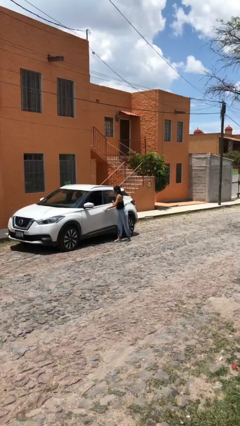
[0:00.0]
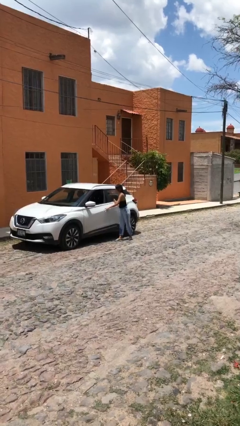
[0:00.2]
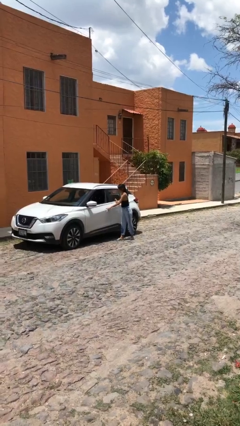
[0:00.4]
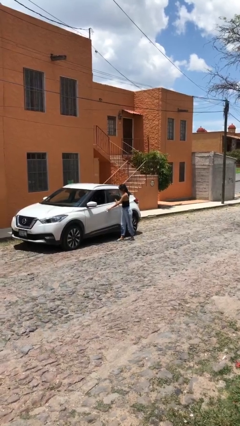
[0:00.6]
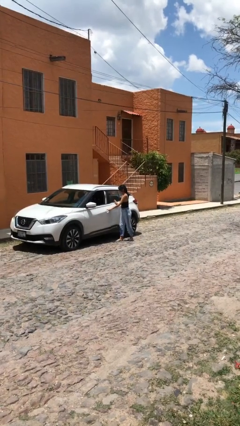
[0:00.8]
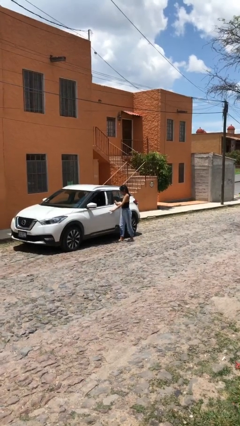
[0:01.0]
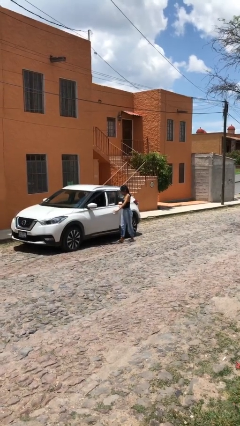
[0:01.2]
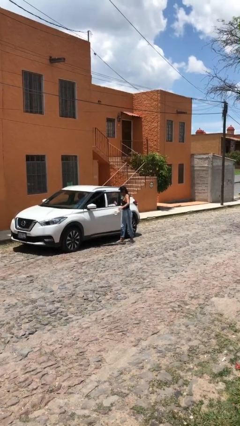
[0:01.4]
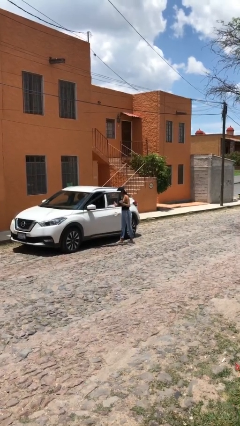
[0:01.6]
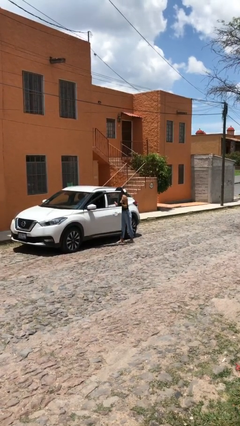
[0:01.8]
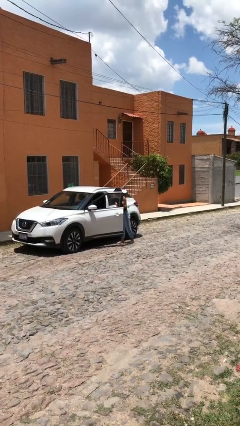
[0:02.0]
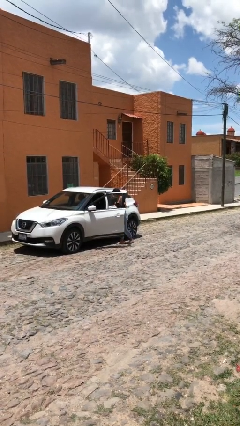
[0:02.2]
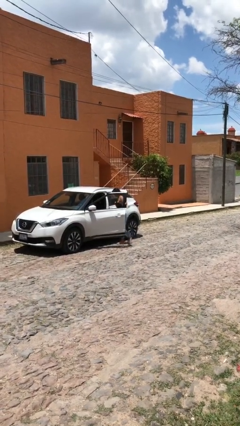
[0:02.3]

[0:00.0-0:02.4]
person opens car door

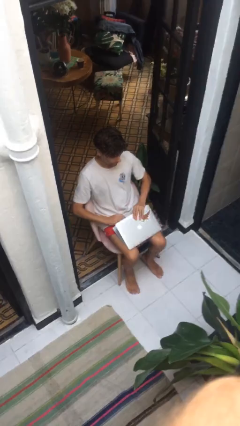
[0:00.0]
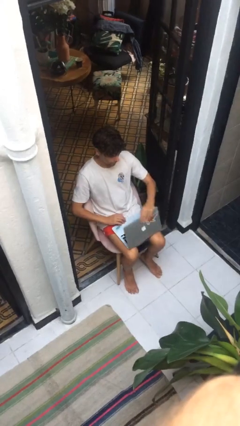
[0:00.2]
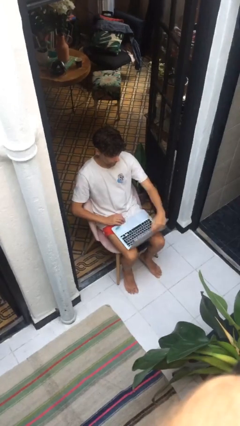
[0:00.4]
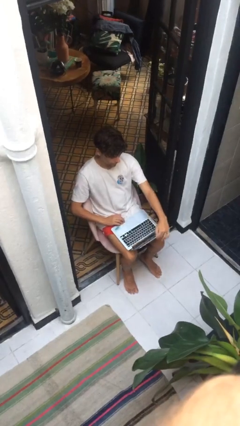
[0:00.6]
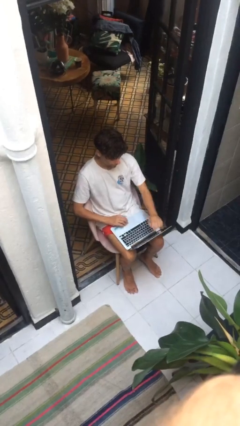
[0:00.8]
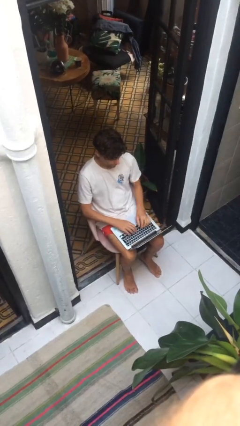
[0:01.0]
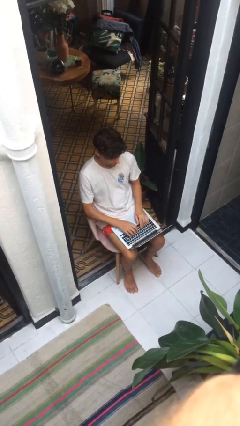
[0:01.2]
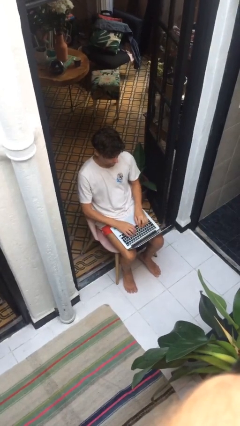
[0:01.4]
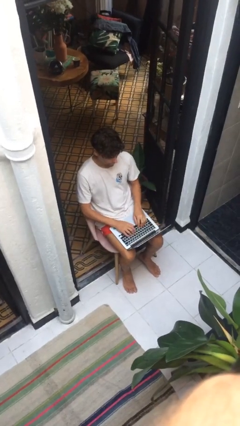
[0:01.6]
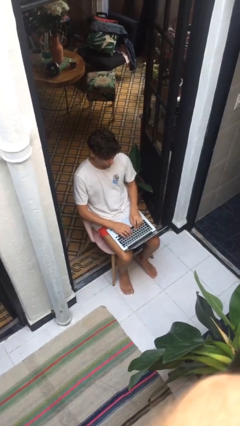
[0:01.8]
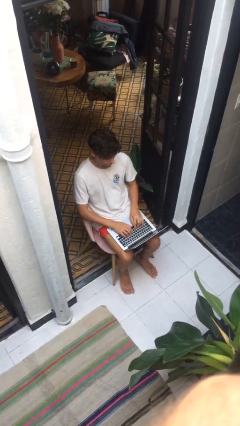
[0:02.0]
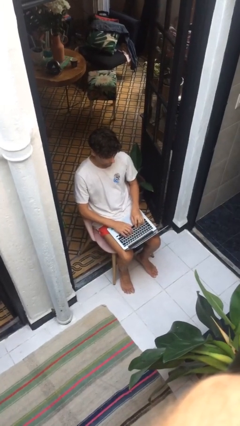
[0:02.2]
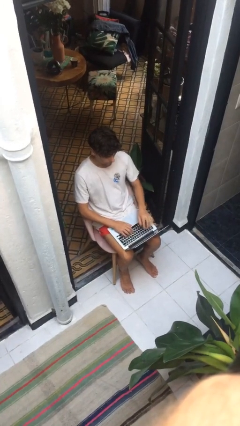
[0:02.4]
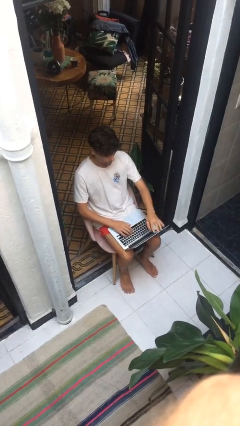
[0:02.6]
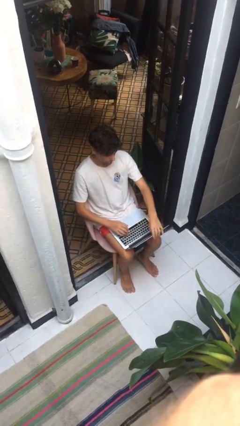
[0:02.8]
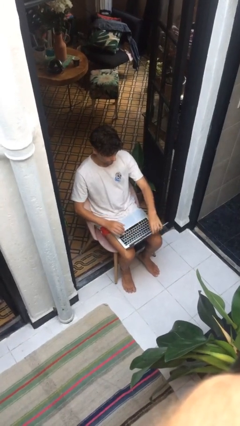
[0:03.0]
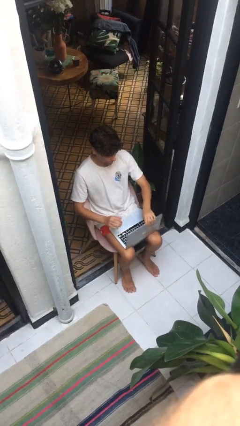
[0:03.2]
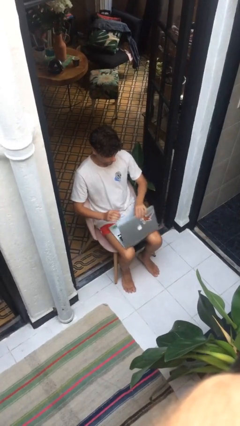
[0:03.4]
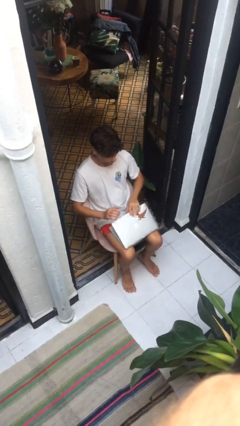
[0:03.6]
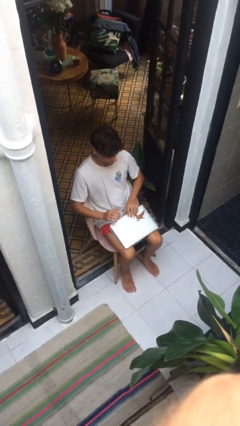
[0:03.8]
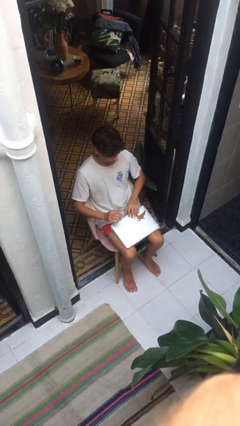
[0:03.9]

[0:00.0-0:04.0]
person interacts with laptop
